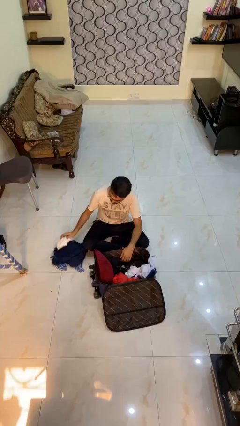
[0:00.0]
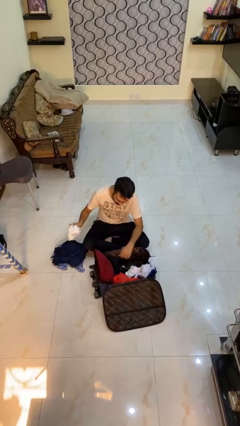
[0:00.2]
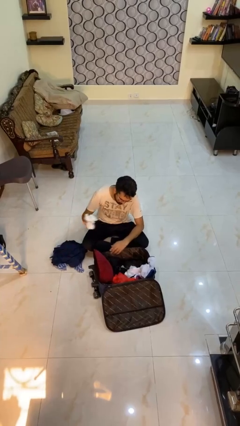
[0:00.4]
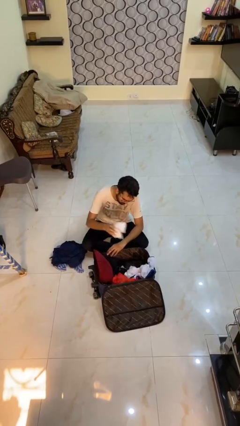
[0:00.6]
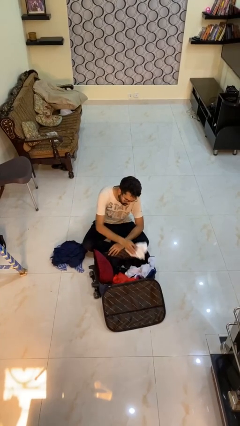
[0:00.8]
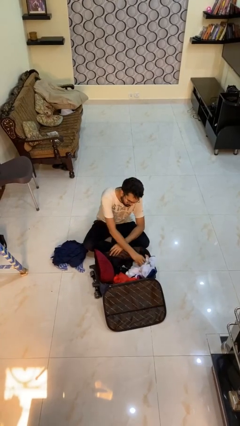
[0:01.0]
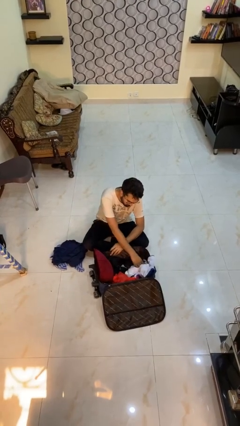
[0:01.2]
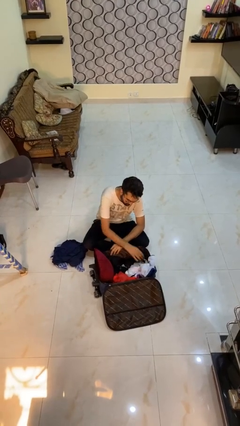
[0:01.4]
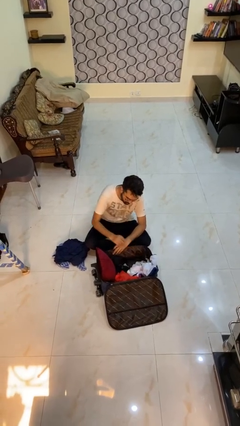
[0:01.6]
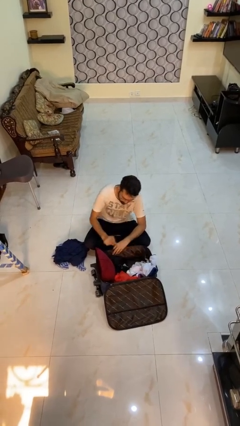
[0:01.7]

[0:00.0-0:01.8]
person loads clothes into suitcase

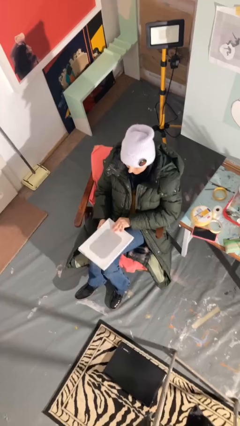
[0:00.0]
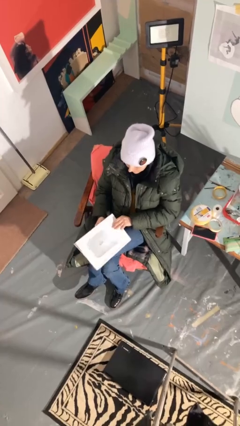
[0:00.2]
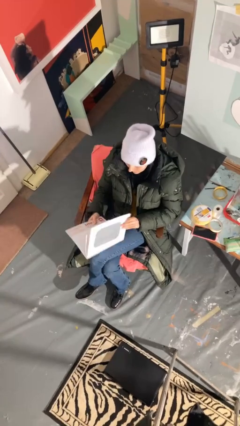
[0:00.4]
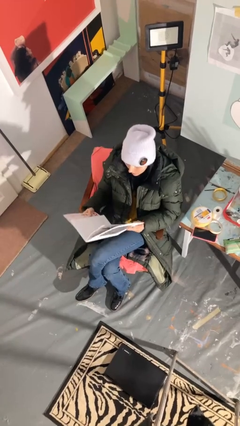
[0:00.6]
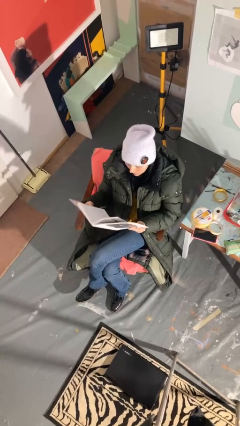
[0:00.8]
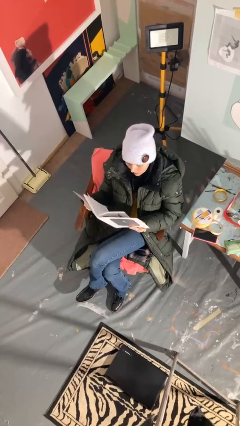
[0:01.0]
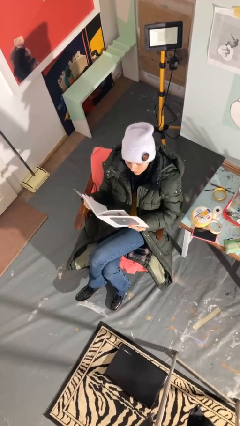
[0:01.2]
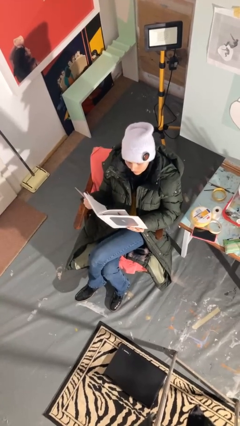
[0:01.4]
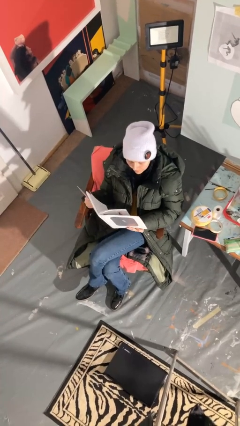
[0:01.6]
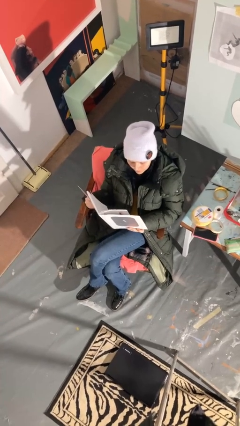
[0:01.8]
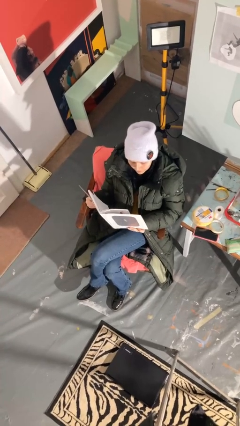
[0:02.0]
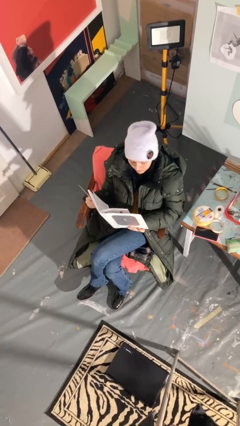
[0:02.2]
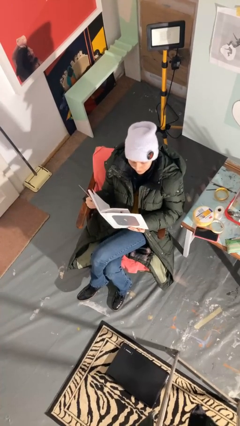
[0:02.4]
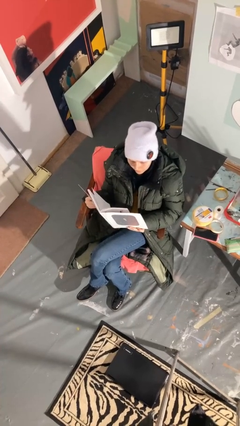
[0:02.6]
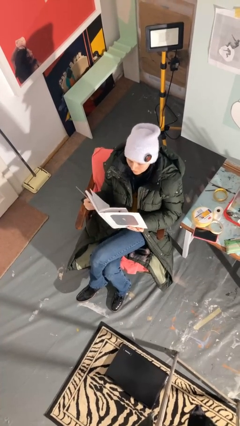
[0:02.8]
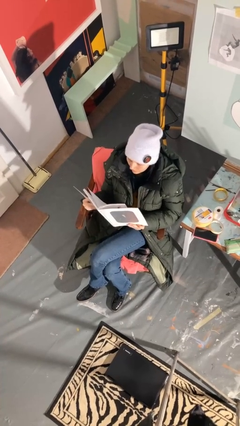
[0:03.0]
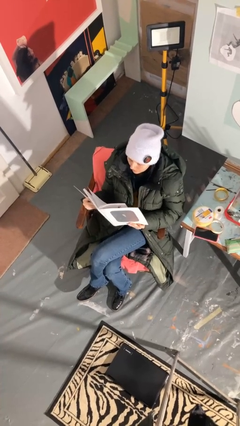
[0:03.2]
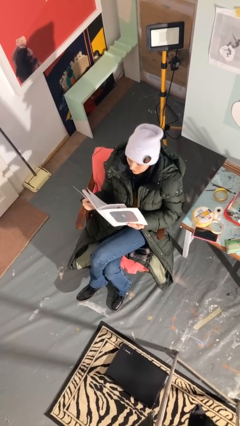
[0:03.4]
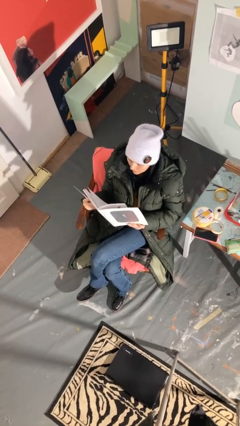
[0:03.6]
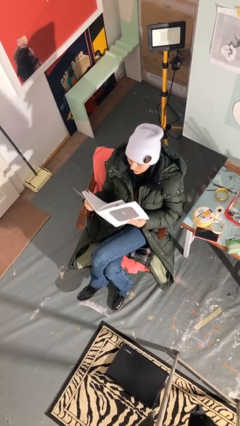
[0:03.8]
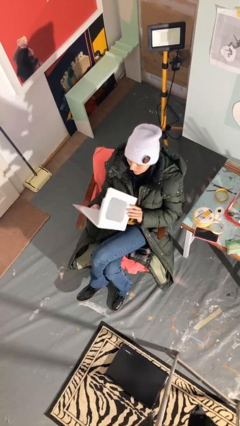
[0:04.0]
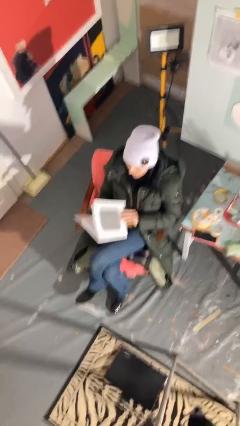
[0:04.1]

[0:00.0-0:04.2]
person reads document

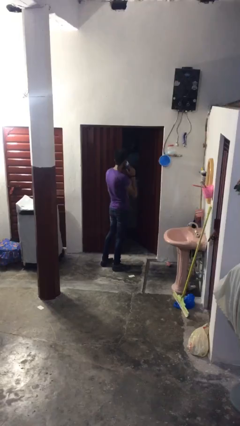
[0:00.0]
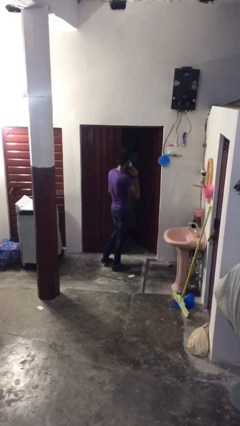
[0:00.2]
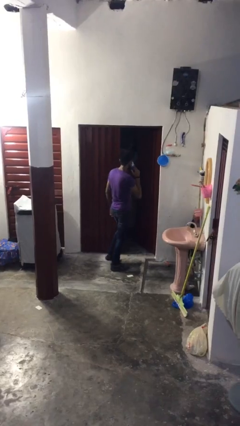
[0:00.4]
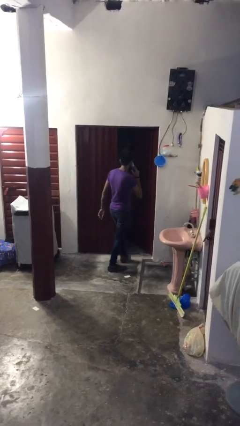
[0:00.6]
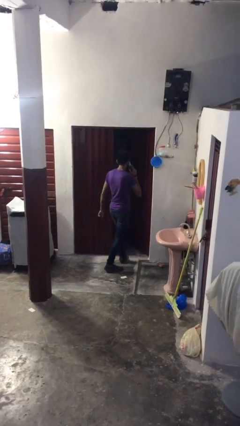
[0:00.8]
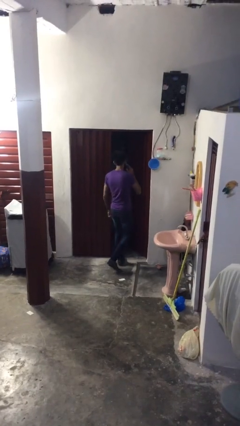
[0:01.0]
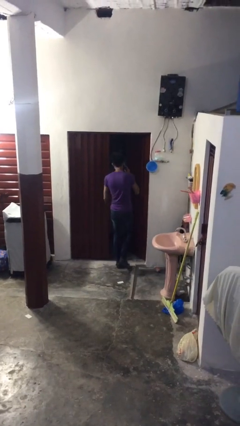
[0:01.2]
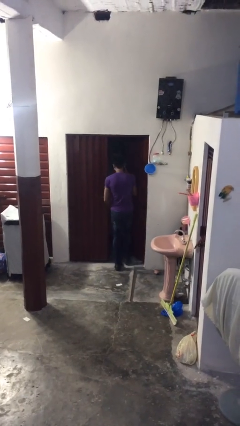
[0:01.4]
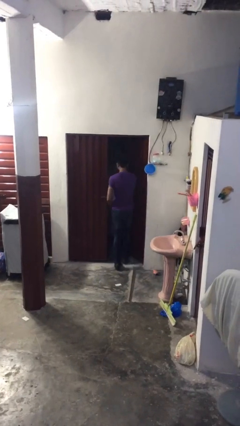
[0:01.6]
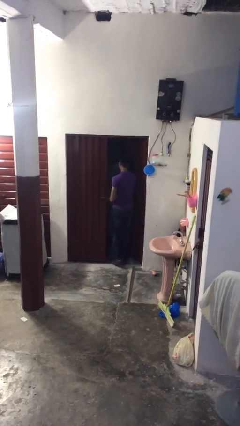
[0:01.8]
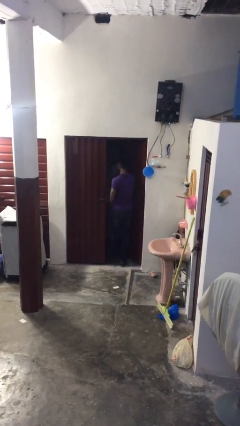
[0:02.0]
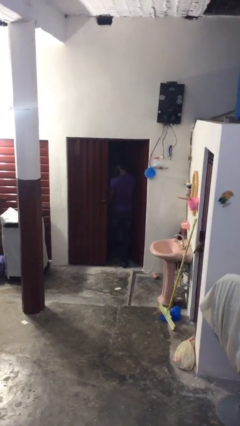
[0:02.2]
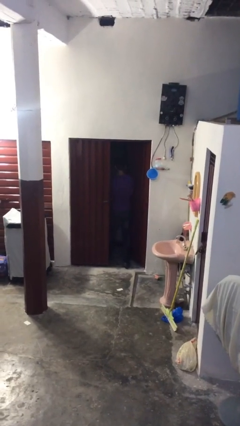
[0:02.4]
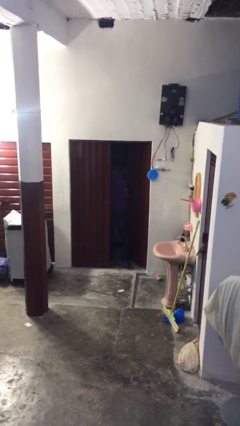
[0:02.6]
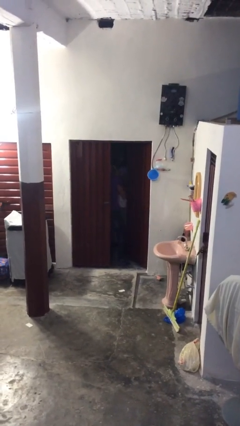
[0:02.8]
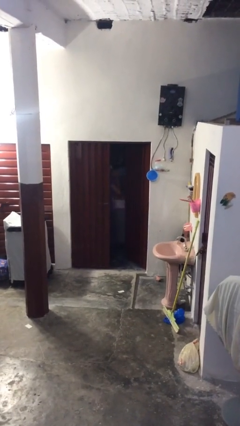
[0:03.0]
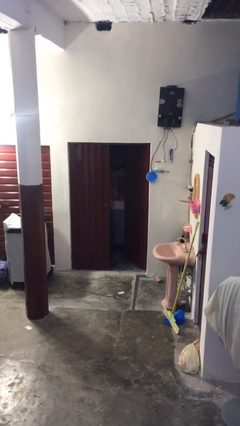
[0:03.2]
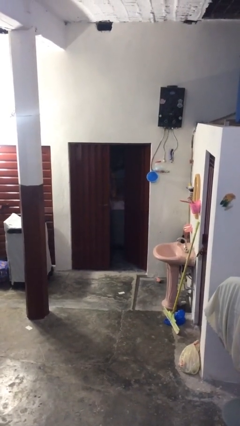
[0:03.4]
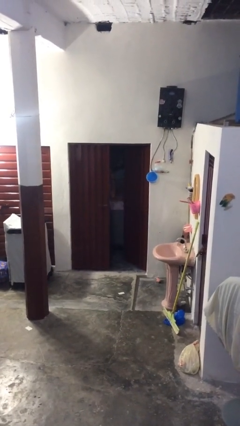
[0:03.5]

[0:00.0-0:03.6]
person exits scene through structure

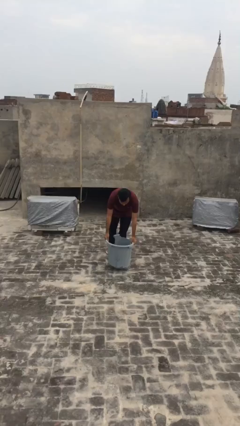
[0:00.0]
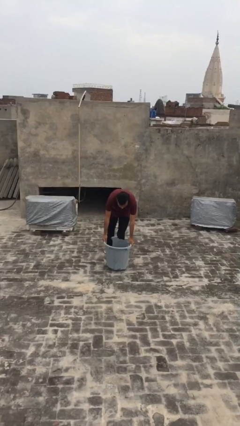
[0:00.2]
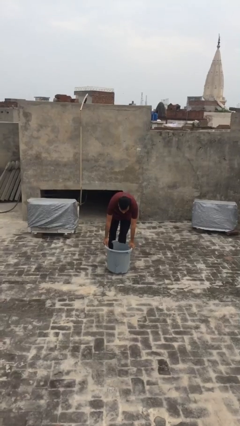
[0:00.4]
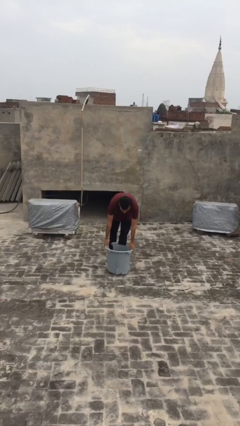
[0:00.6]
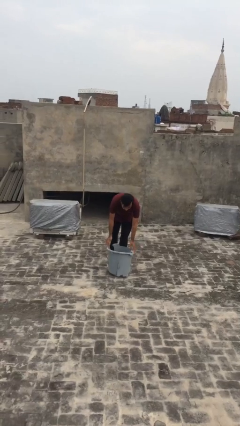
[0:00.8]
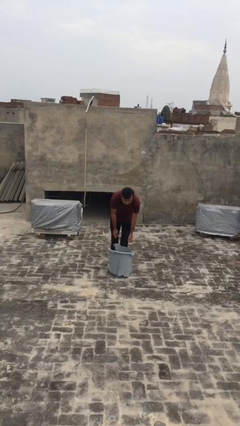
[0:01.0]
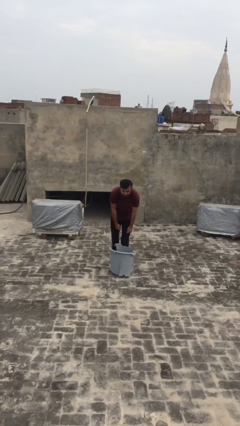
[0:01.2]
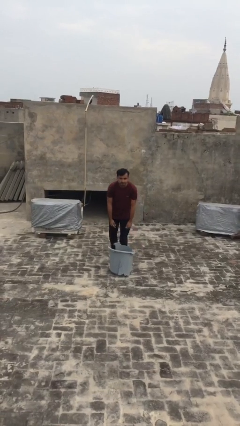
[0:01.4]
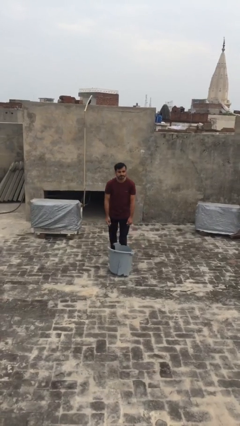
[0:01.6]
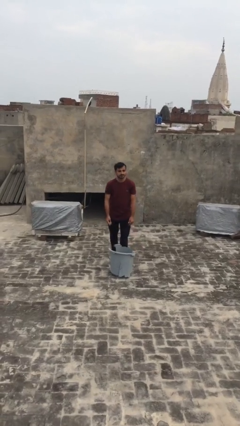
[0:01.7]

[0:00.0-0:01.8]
person puts down object on floor

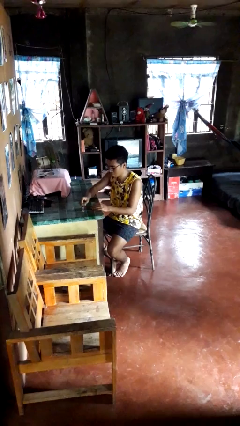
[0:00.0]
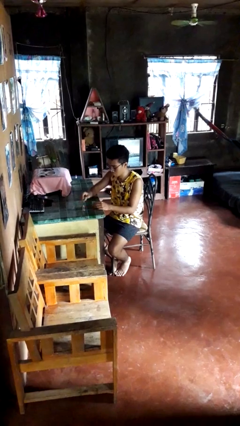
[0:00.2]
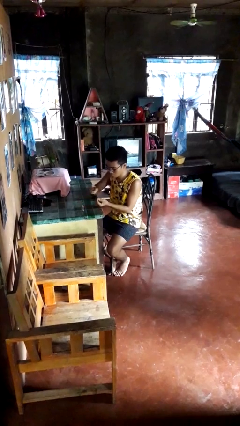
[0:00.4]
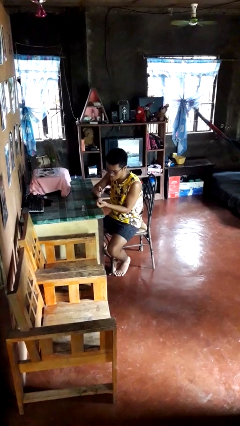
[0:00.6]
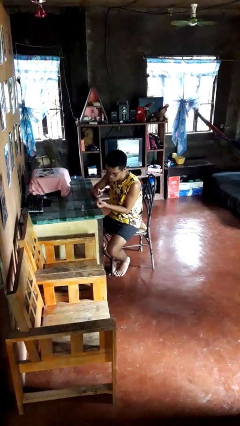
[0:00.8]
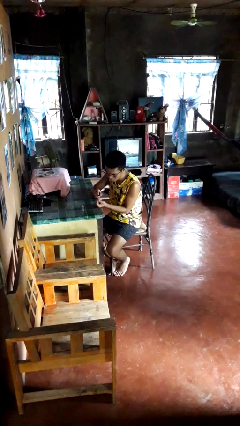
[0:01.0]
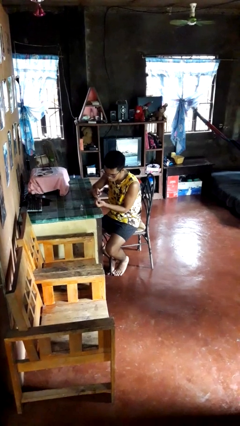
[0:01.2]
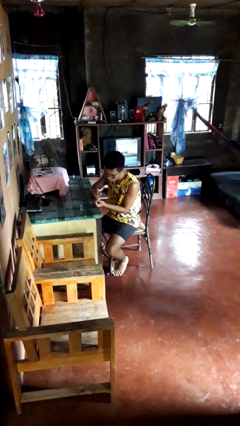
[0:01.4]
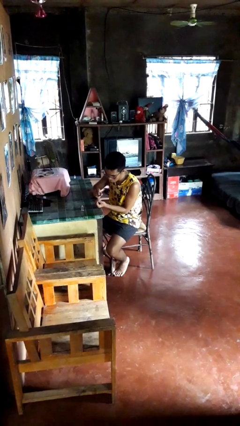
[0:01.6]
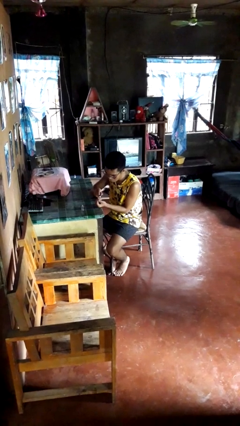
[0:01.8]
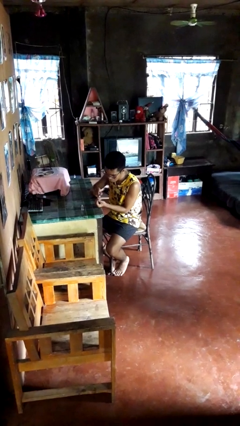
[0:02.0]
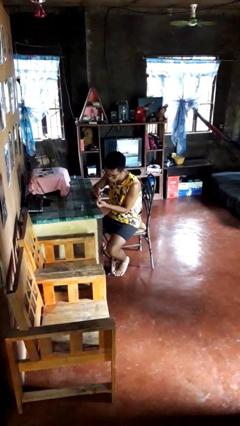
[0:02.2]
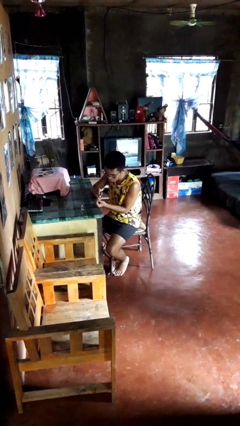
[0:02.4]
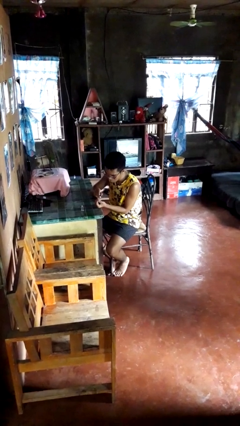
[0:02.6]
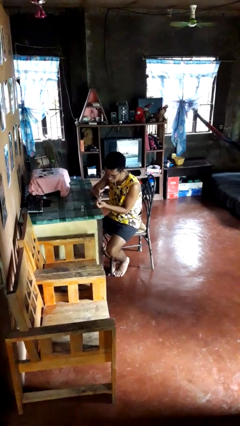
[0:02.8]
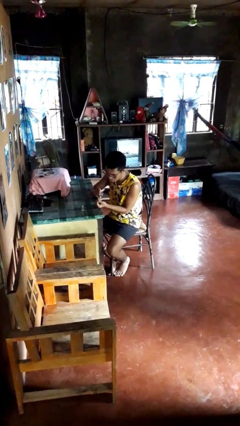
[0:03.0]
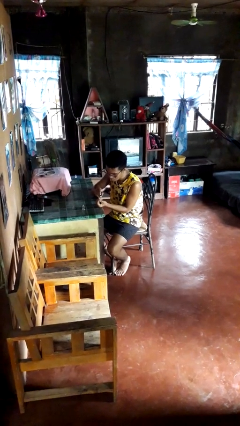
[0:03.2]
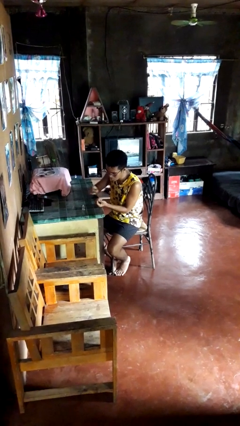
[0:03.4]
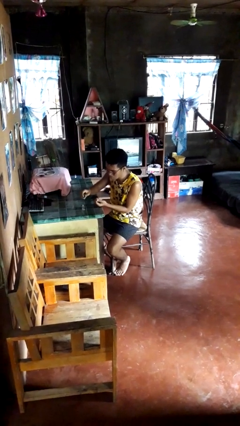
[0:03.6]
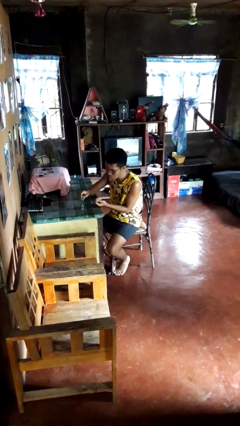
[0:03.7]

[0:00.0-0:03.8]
person paints fingernails

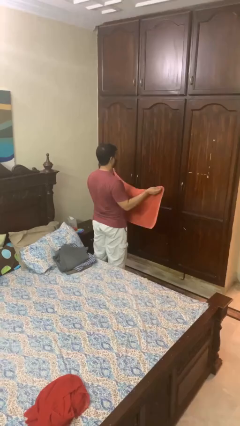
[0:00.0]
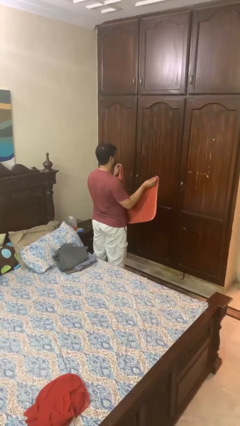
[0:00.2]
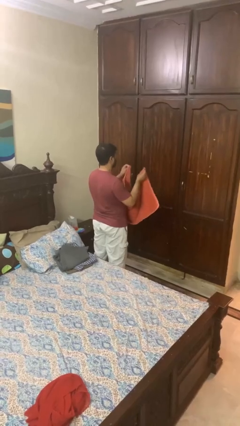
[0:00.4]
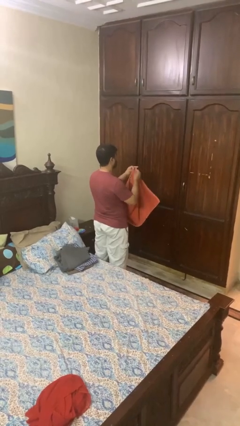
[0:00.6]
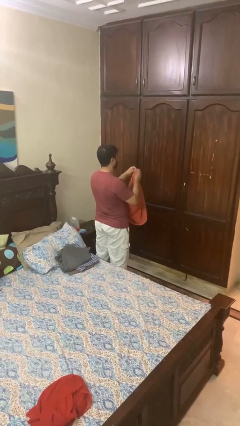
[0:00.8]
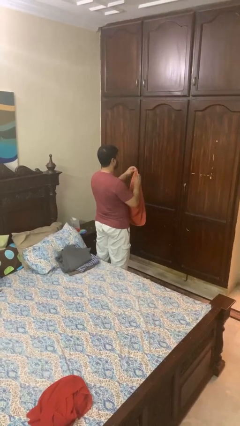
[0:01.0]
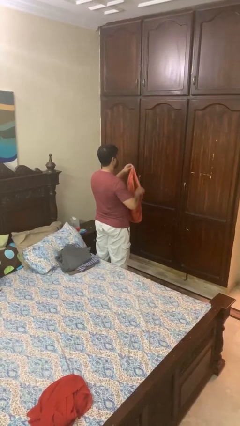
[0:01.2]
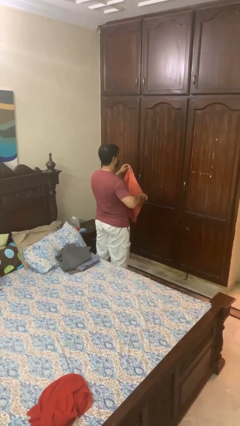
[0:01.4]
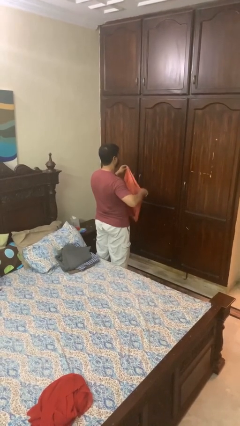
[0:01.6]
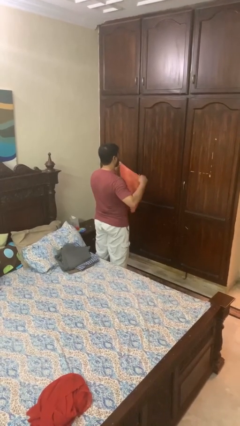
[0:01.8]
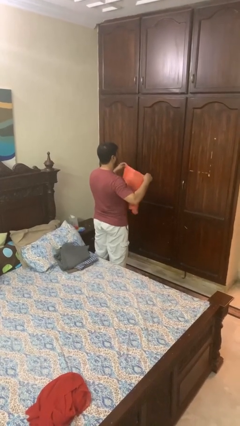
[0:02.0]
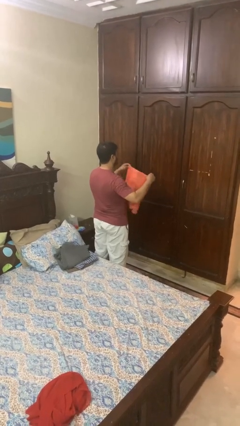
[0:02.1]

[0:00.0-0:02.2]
person folds towel
